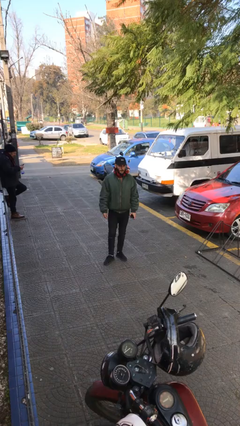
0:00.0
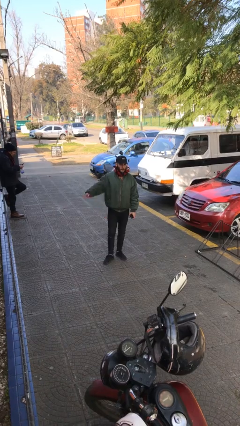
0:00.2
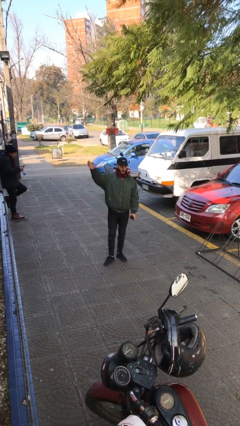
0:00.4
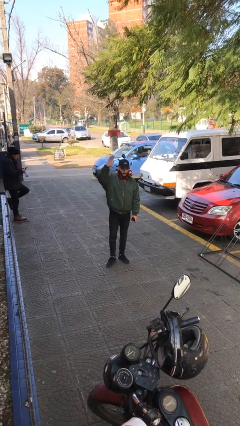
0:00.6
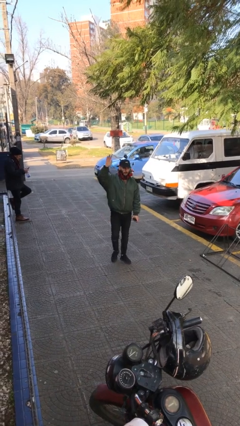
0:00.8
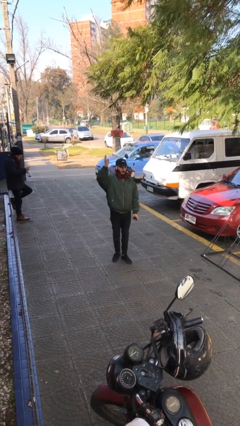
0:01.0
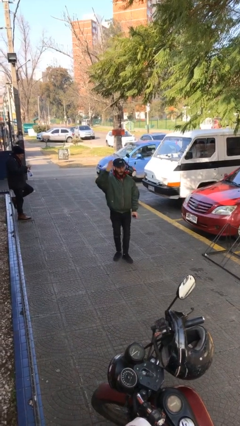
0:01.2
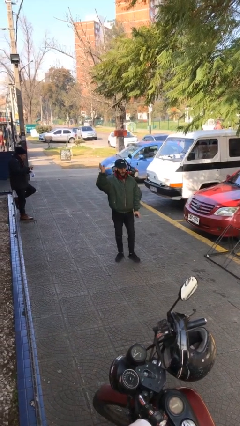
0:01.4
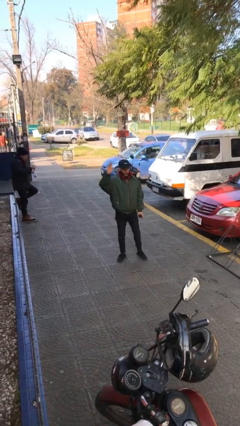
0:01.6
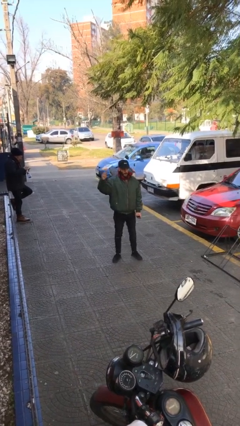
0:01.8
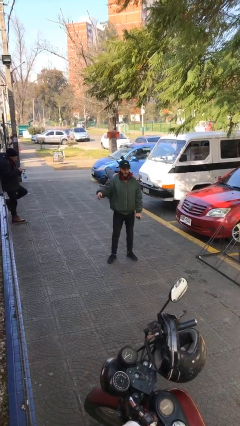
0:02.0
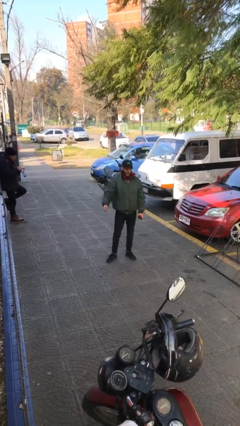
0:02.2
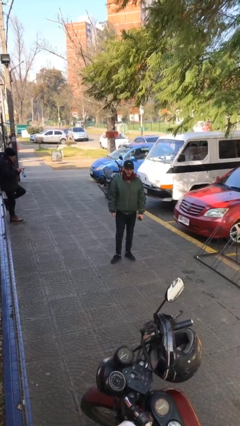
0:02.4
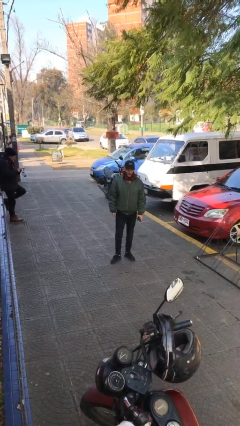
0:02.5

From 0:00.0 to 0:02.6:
person waves at person

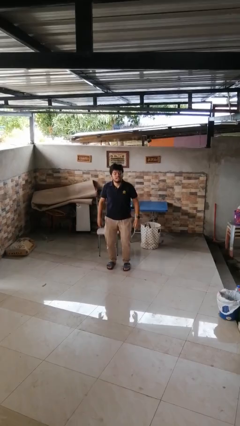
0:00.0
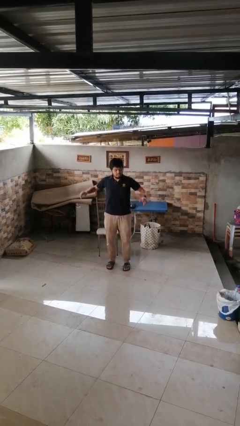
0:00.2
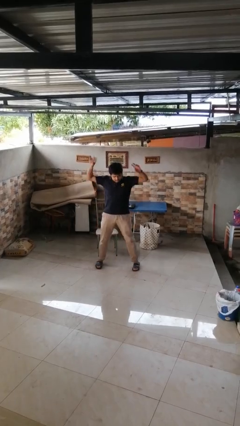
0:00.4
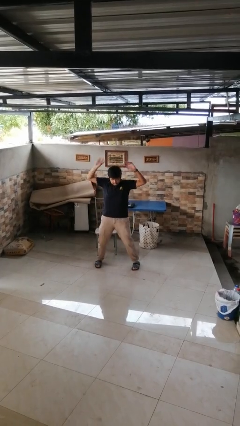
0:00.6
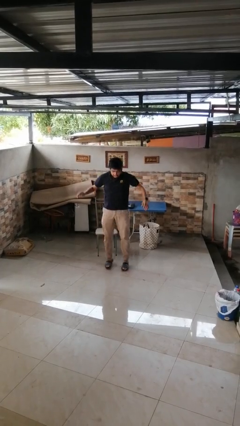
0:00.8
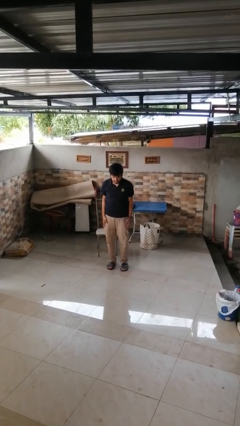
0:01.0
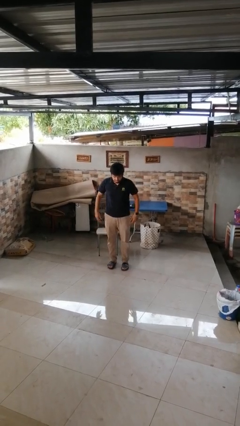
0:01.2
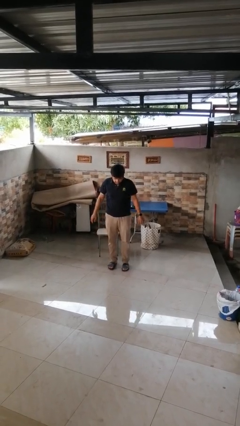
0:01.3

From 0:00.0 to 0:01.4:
person exercises with jumping jacks

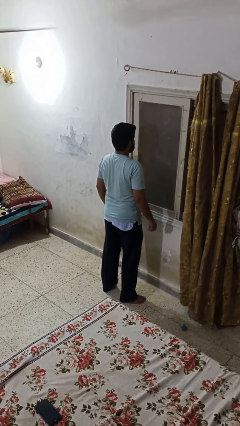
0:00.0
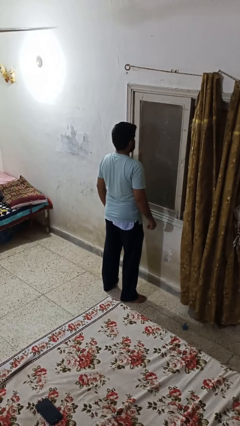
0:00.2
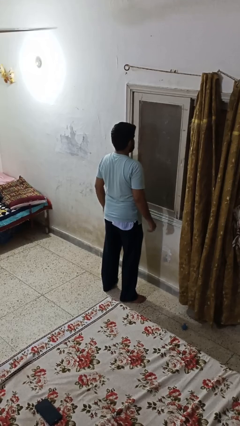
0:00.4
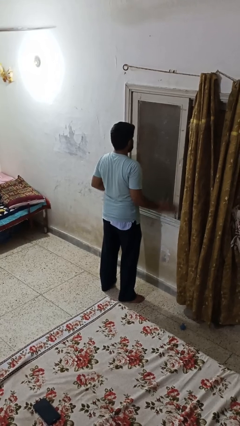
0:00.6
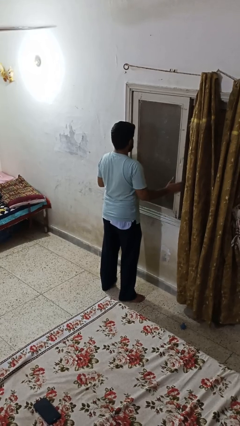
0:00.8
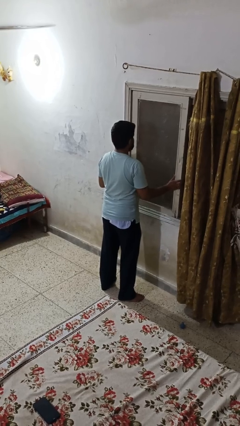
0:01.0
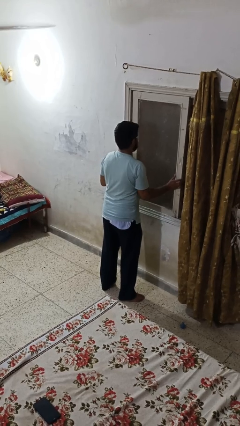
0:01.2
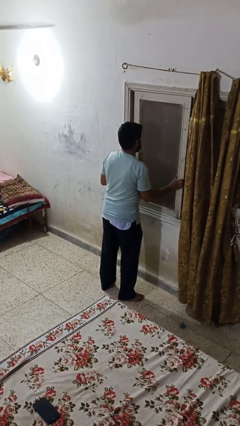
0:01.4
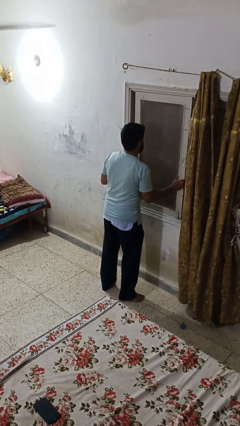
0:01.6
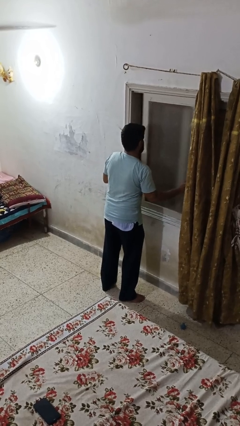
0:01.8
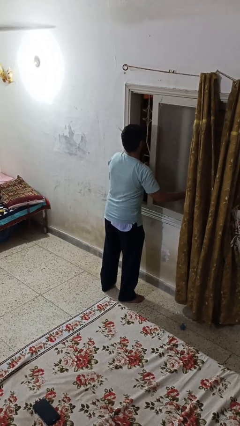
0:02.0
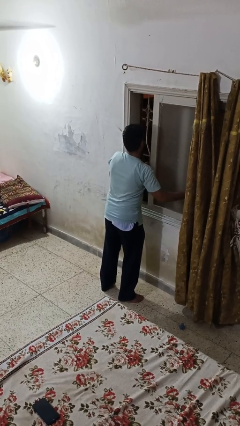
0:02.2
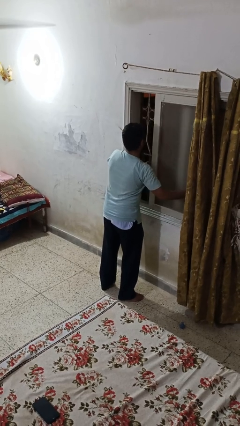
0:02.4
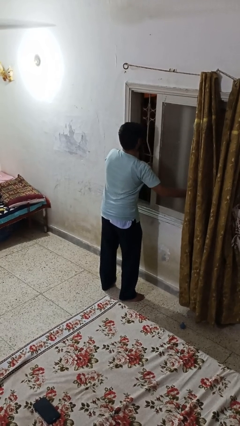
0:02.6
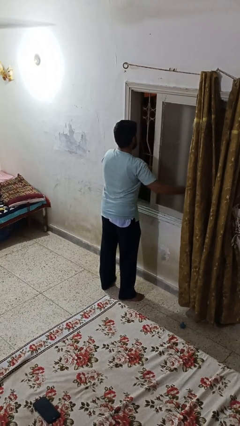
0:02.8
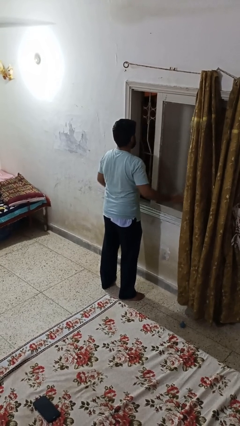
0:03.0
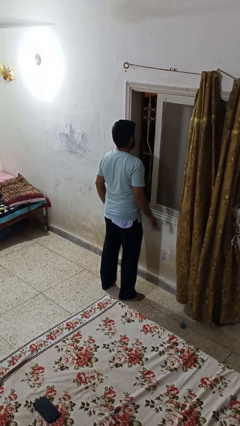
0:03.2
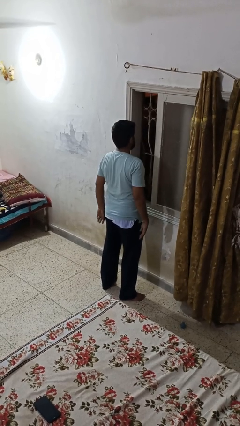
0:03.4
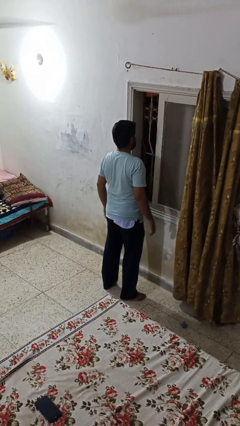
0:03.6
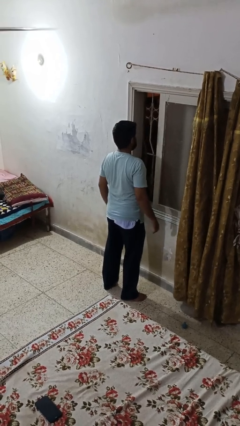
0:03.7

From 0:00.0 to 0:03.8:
person opens sliding door

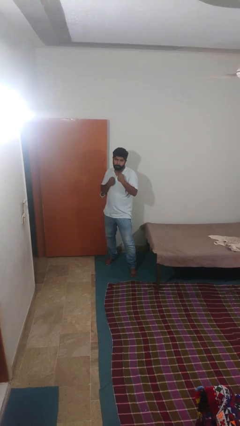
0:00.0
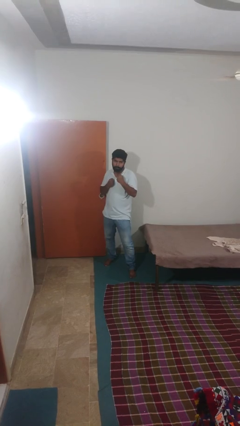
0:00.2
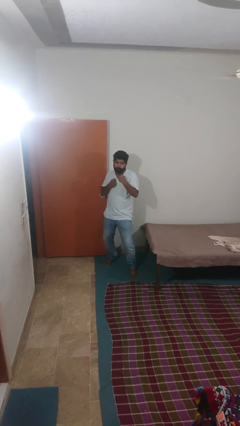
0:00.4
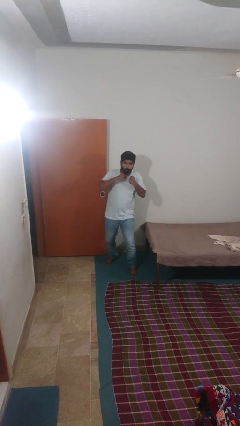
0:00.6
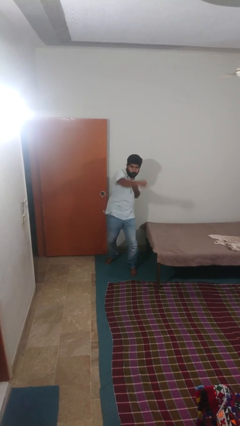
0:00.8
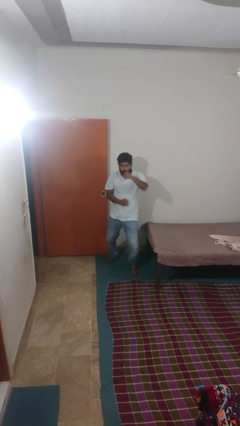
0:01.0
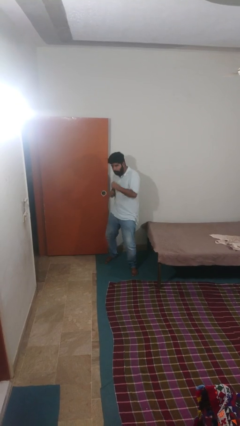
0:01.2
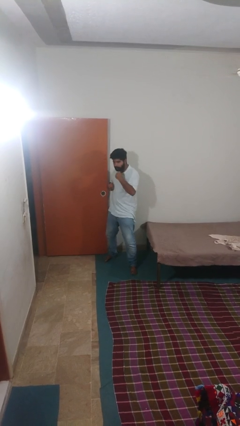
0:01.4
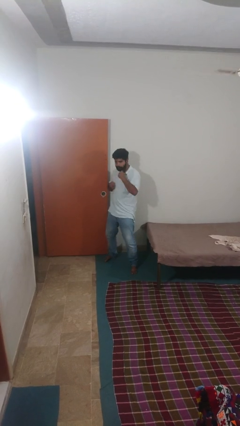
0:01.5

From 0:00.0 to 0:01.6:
person punches

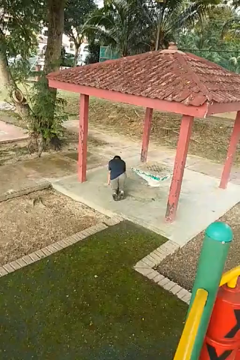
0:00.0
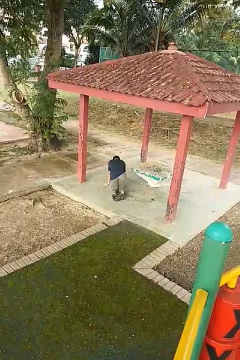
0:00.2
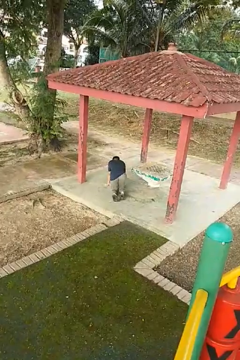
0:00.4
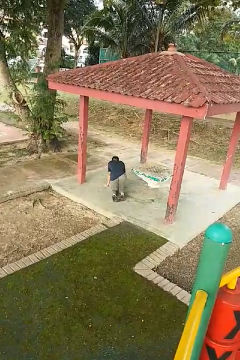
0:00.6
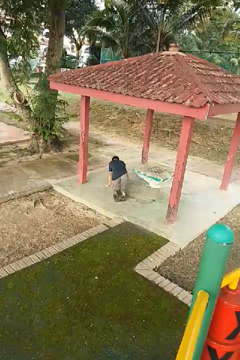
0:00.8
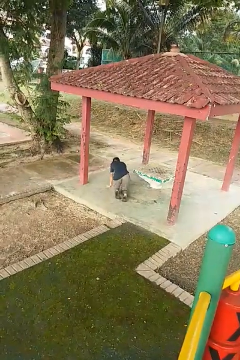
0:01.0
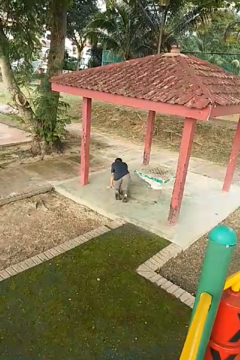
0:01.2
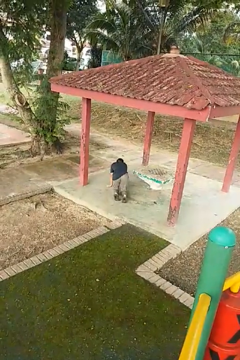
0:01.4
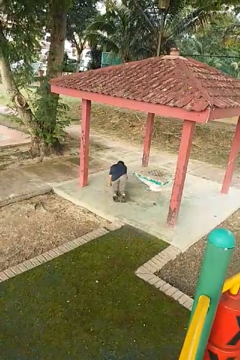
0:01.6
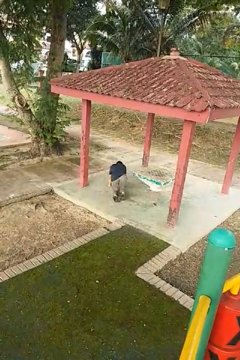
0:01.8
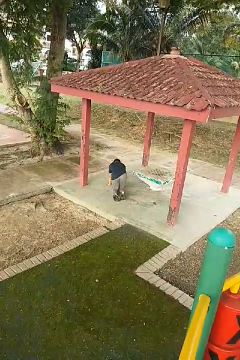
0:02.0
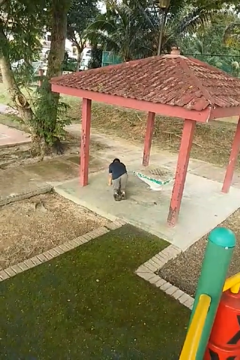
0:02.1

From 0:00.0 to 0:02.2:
person crawls

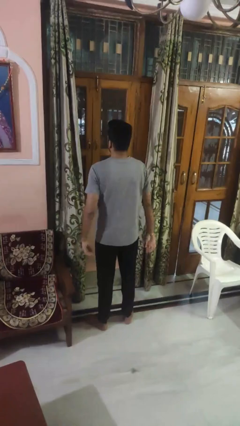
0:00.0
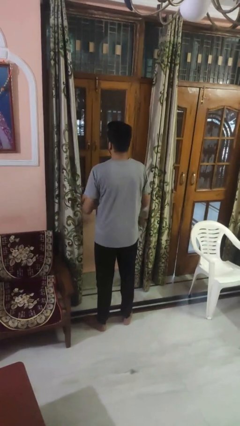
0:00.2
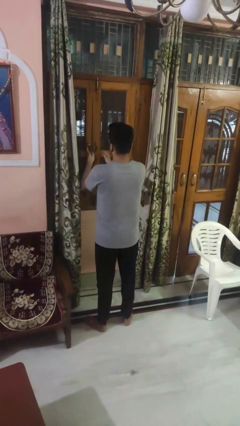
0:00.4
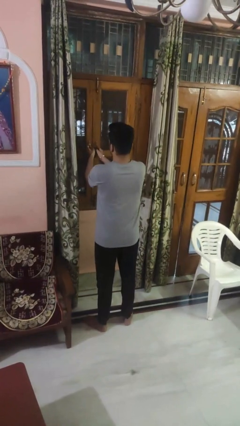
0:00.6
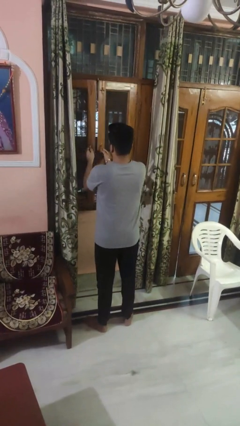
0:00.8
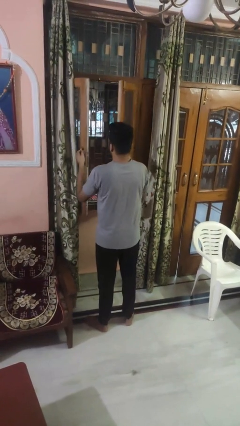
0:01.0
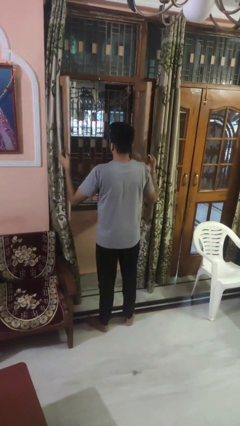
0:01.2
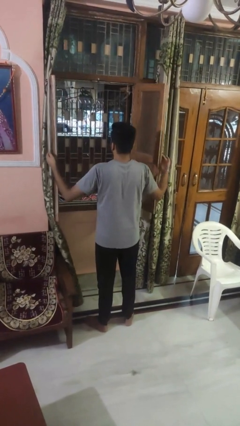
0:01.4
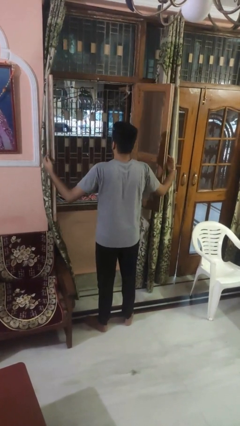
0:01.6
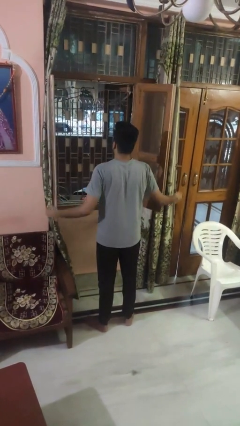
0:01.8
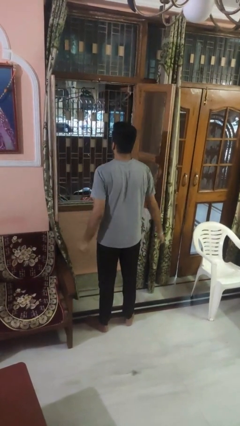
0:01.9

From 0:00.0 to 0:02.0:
person opens home window

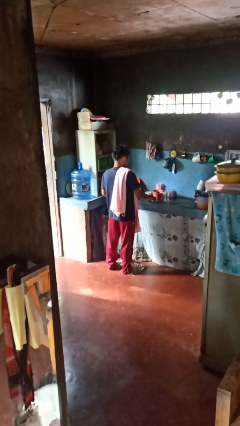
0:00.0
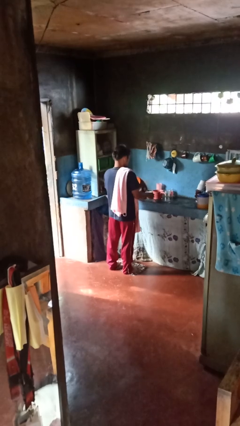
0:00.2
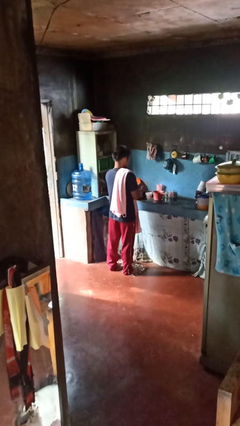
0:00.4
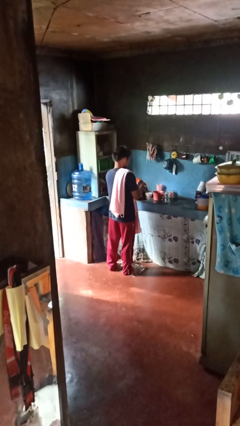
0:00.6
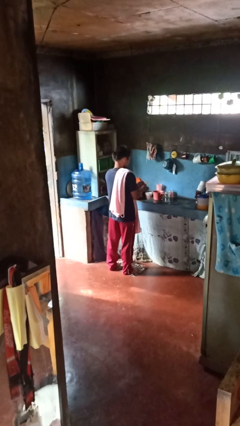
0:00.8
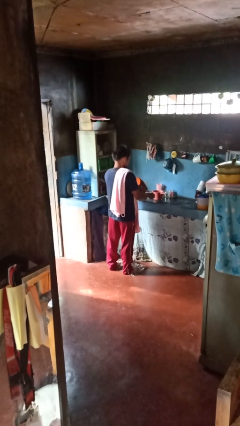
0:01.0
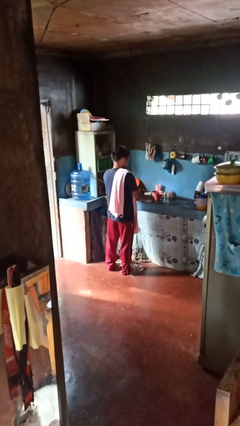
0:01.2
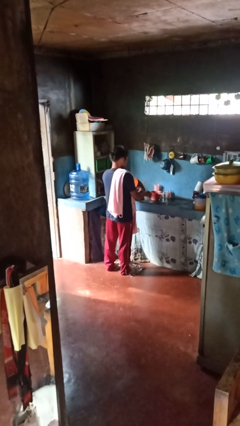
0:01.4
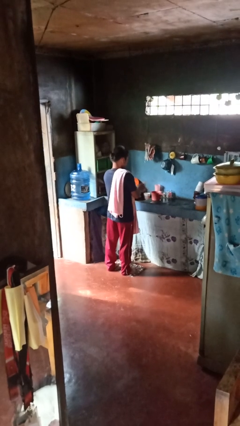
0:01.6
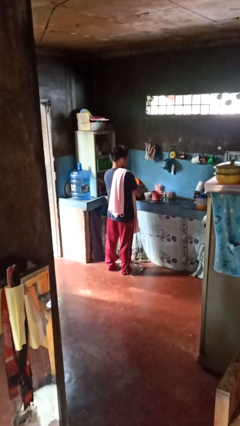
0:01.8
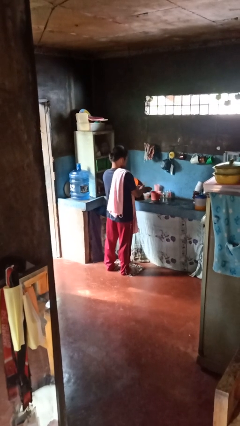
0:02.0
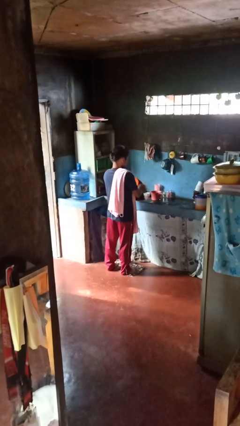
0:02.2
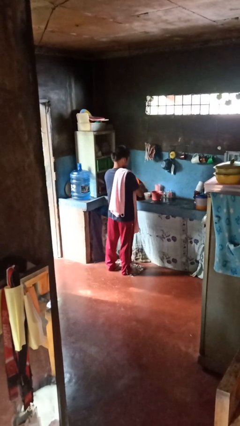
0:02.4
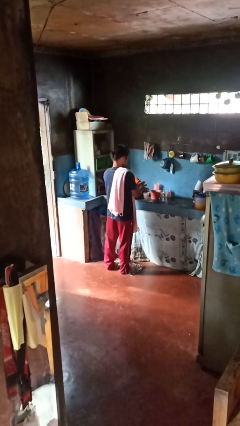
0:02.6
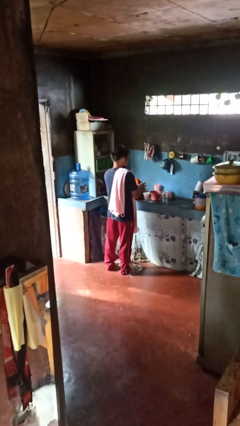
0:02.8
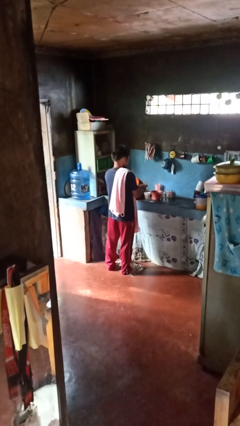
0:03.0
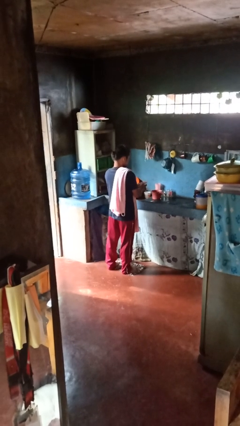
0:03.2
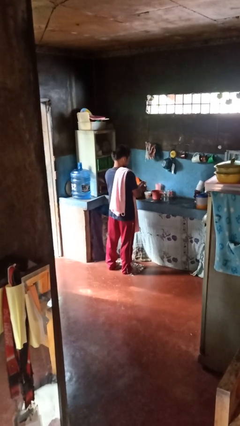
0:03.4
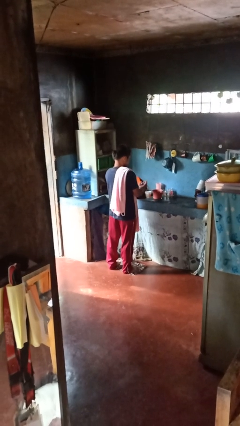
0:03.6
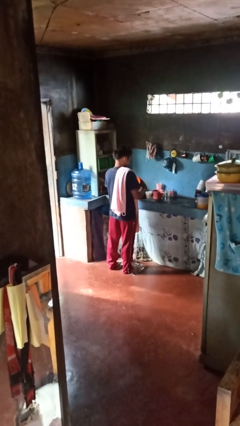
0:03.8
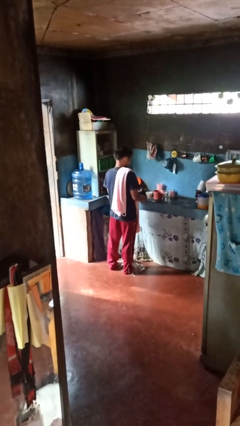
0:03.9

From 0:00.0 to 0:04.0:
person washes hands
